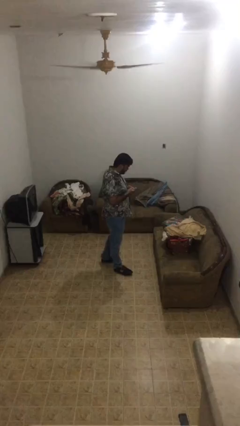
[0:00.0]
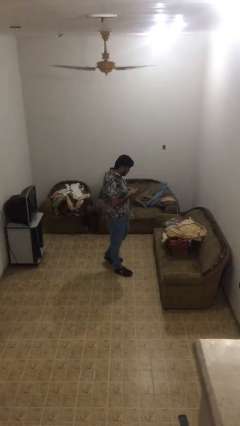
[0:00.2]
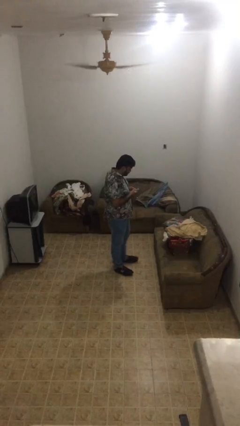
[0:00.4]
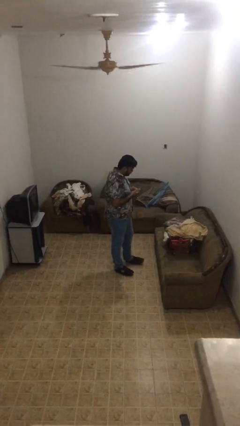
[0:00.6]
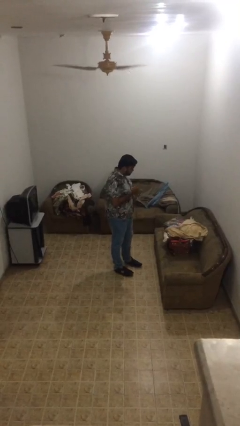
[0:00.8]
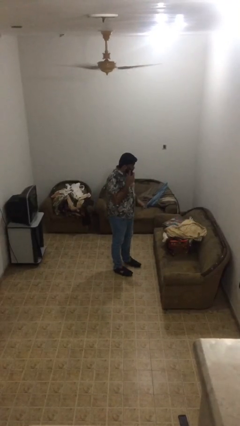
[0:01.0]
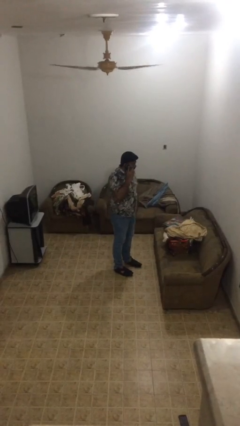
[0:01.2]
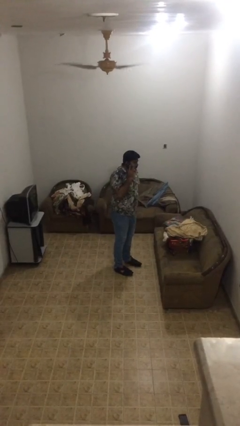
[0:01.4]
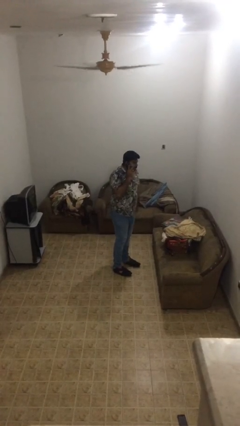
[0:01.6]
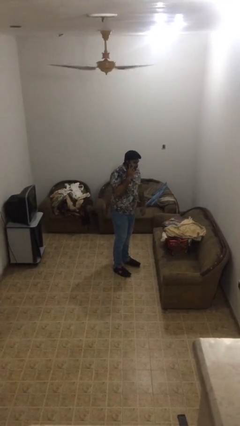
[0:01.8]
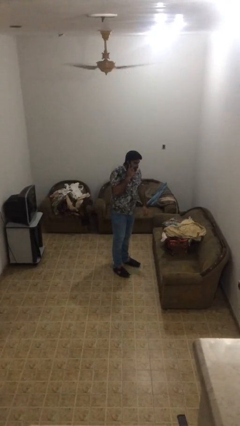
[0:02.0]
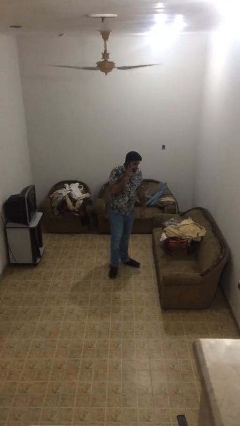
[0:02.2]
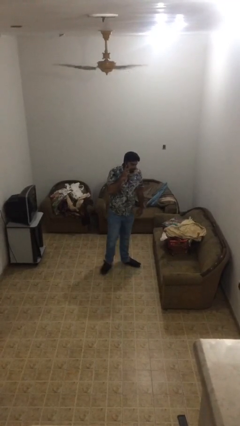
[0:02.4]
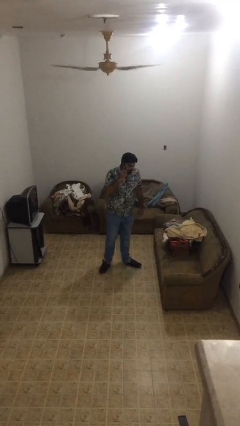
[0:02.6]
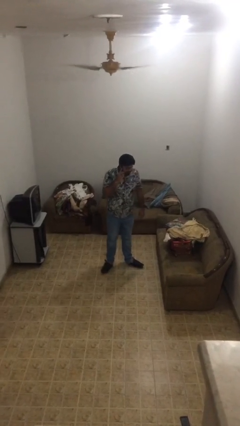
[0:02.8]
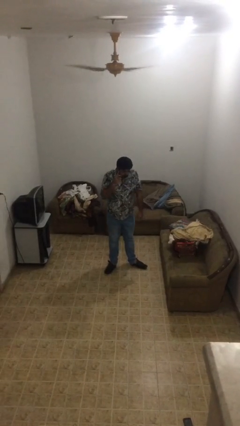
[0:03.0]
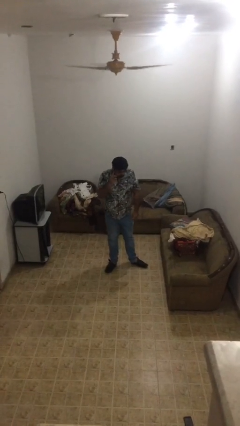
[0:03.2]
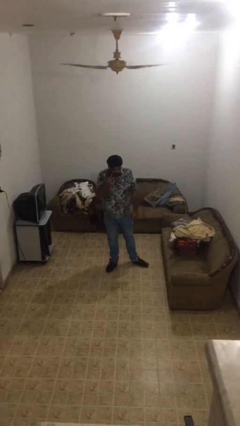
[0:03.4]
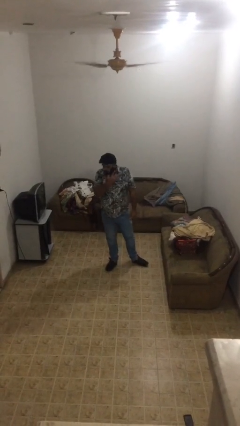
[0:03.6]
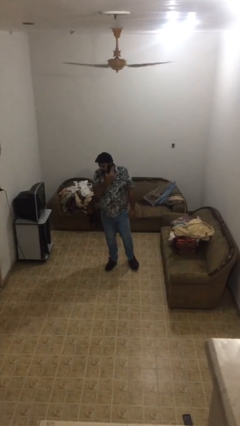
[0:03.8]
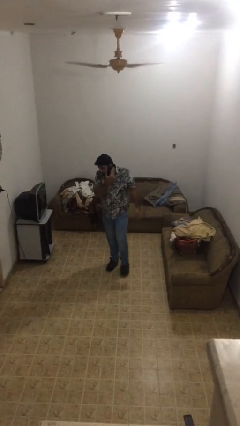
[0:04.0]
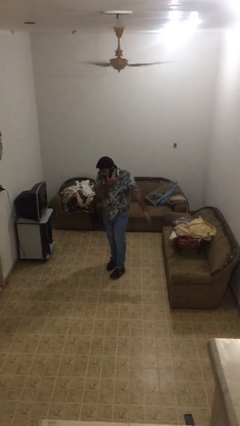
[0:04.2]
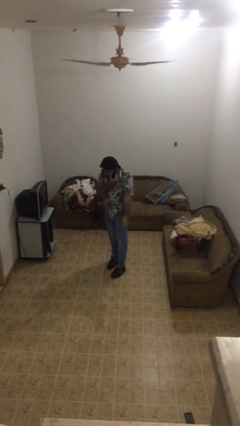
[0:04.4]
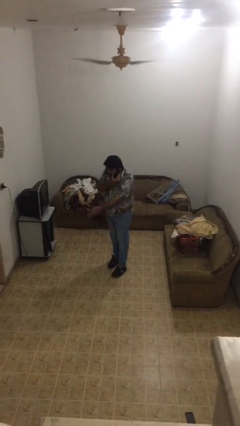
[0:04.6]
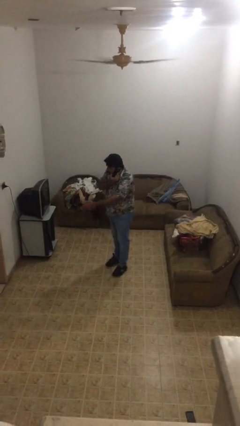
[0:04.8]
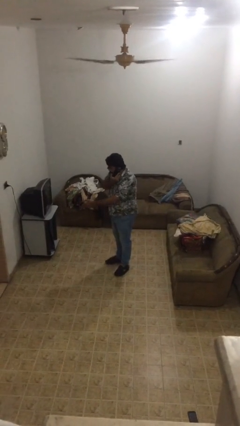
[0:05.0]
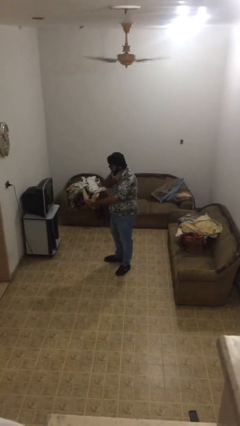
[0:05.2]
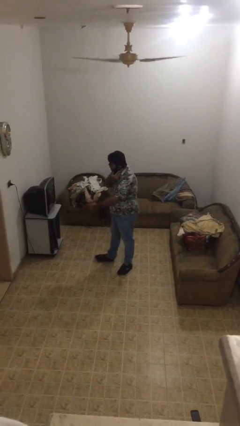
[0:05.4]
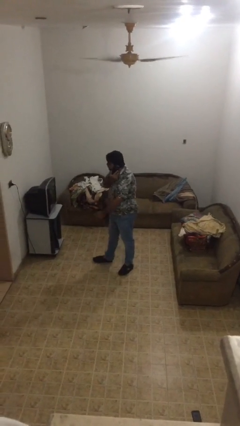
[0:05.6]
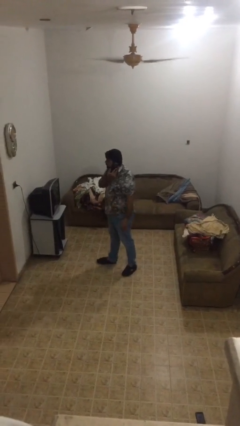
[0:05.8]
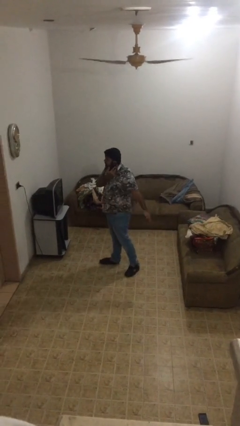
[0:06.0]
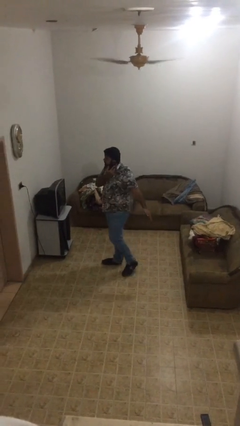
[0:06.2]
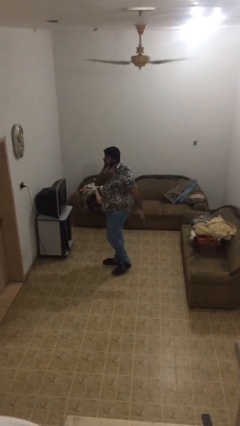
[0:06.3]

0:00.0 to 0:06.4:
person talks on phone

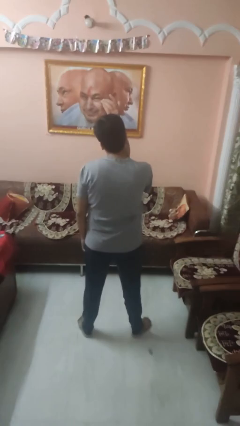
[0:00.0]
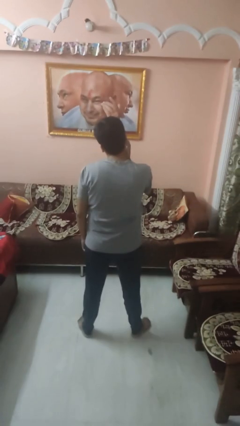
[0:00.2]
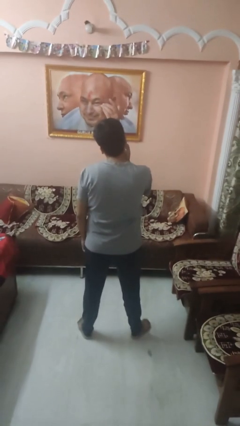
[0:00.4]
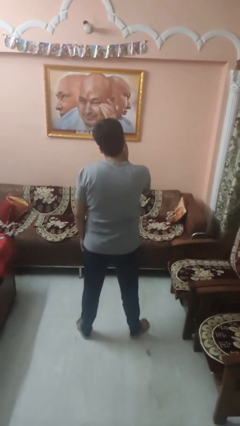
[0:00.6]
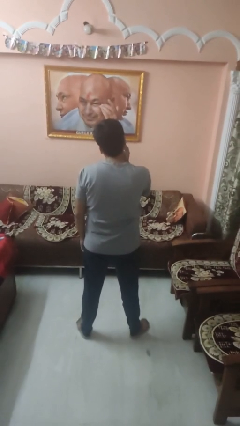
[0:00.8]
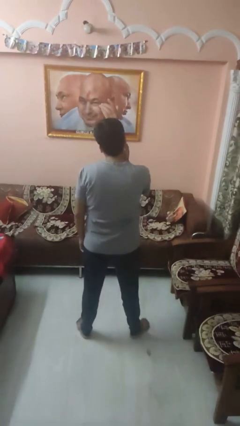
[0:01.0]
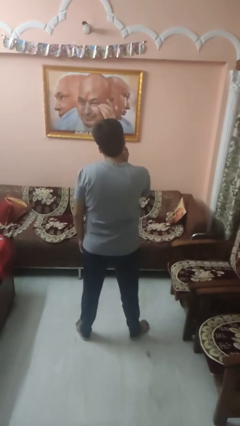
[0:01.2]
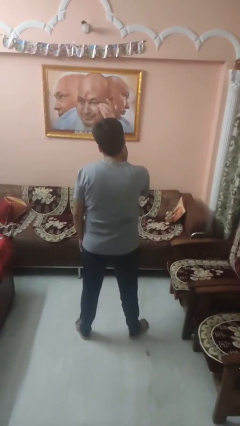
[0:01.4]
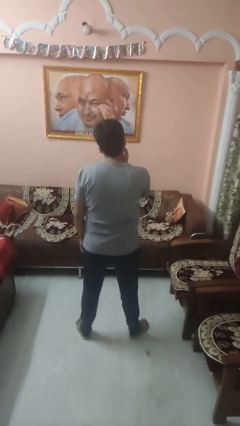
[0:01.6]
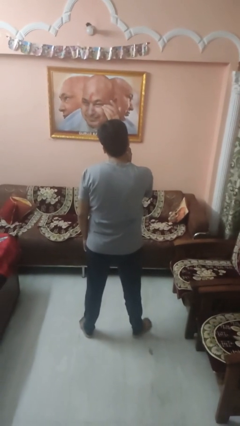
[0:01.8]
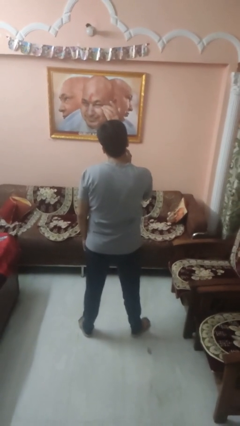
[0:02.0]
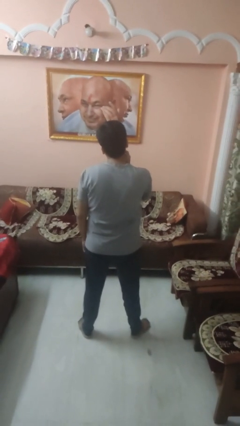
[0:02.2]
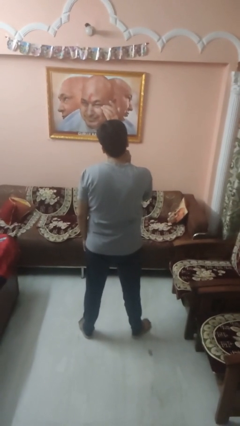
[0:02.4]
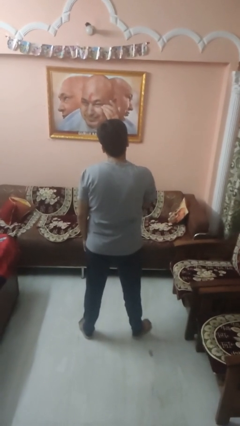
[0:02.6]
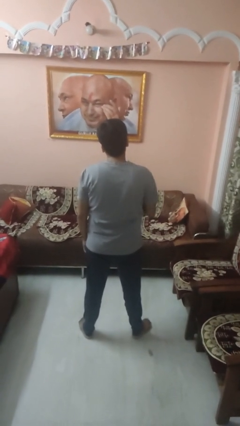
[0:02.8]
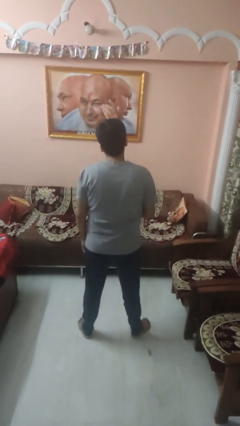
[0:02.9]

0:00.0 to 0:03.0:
person scratches face

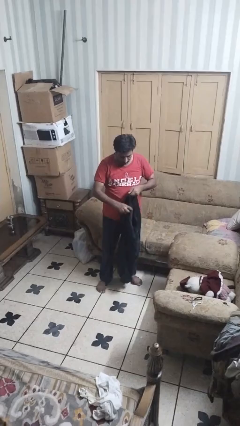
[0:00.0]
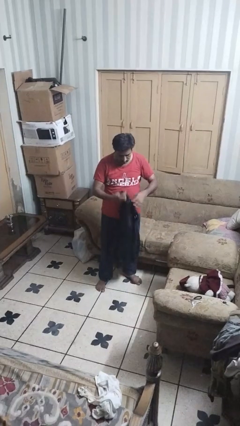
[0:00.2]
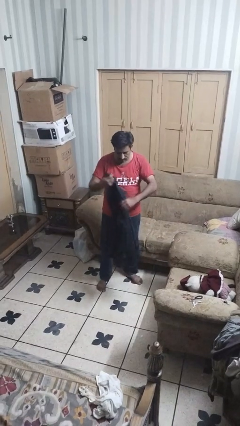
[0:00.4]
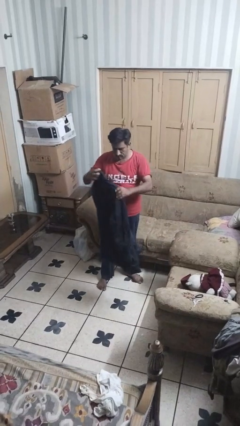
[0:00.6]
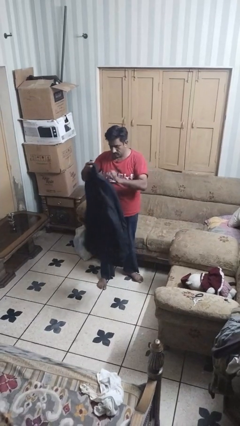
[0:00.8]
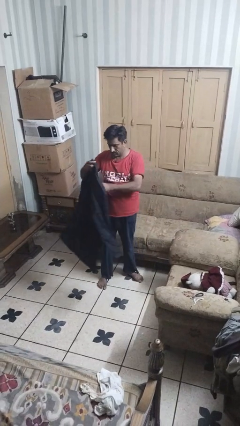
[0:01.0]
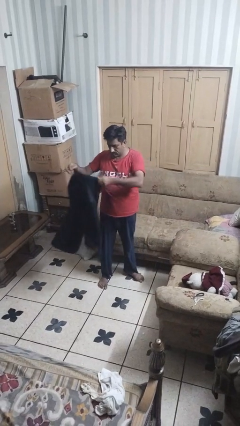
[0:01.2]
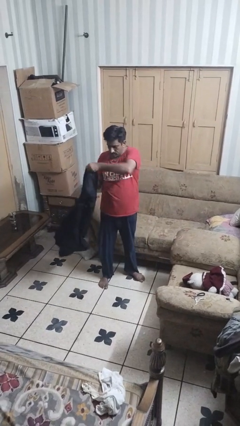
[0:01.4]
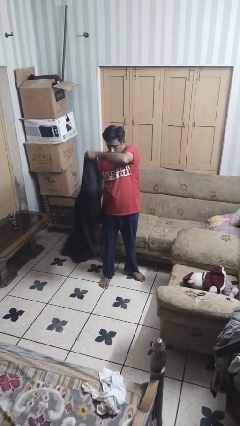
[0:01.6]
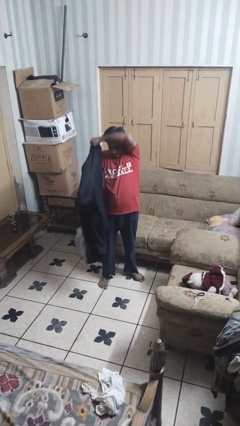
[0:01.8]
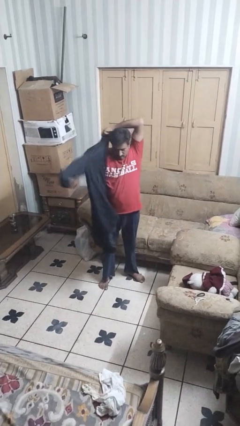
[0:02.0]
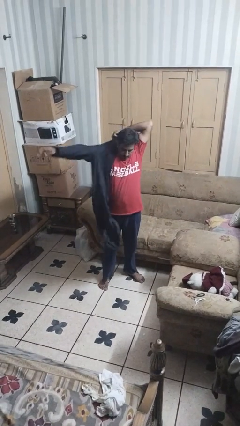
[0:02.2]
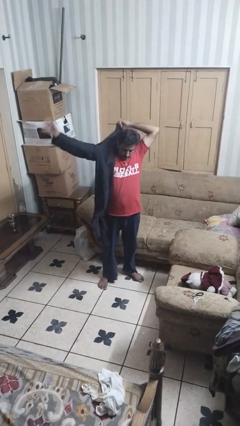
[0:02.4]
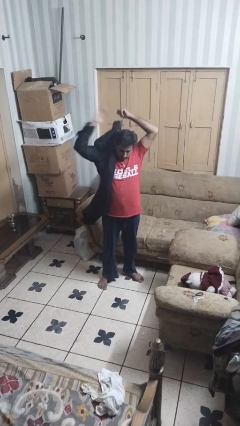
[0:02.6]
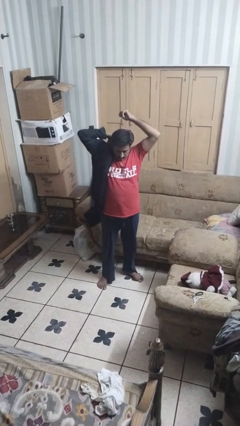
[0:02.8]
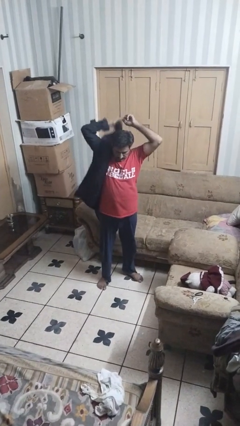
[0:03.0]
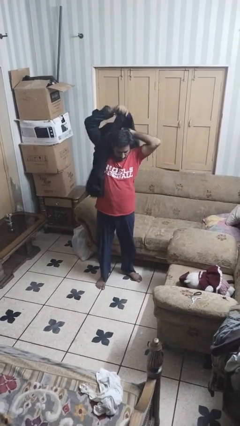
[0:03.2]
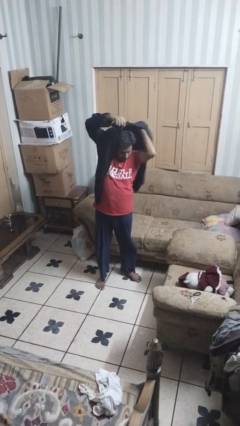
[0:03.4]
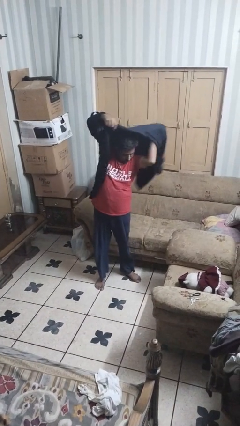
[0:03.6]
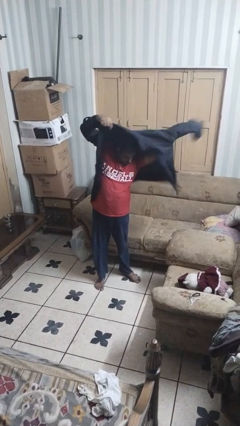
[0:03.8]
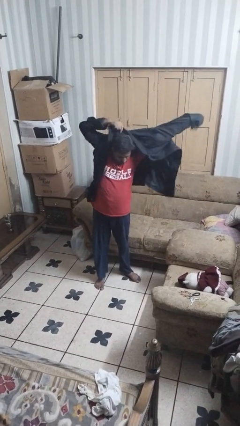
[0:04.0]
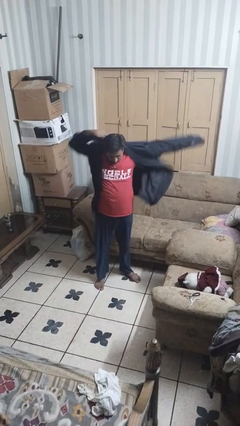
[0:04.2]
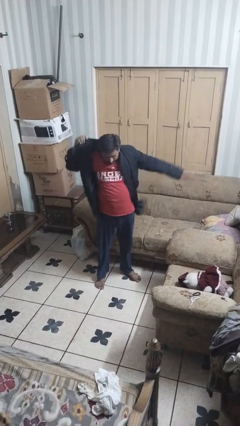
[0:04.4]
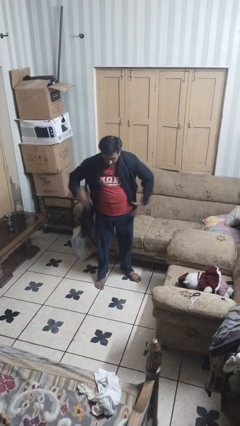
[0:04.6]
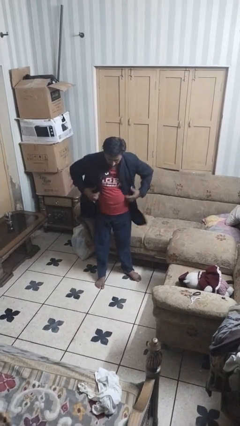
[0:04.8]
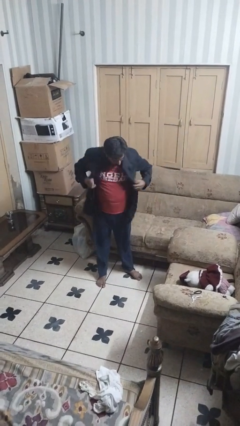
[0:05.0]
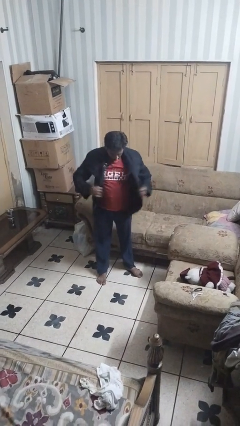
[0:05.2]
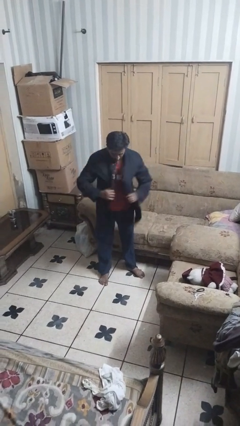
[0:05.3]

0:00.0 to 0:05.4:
person puts on jacket

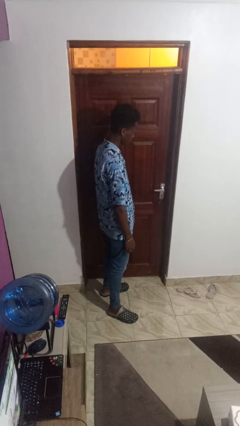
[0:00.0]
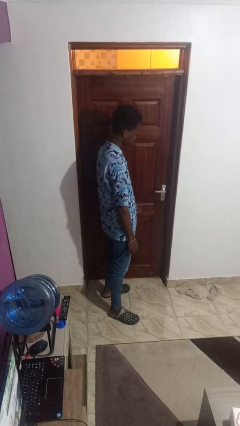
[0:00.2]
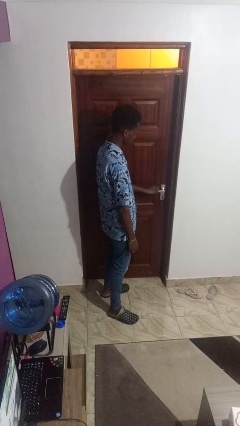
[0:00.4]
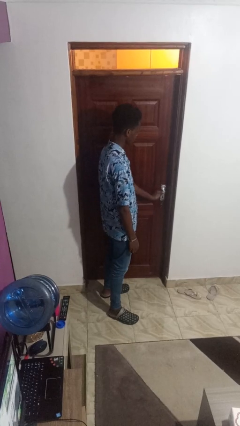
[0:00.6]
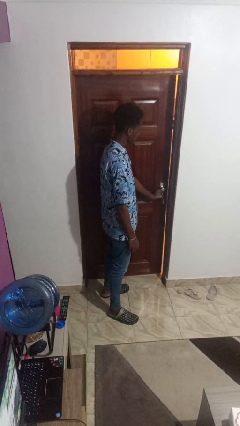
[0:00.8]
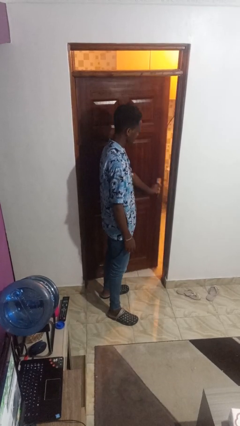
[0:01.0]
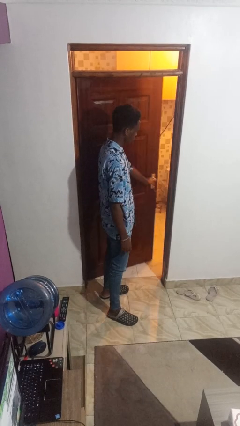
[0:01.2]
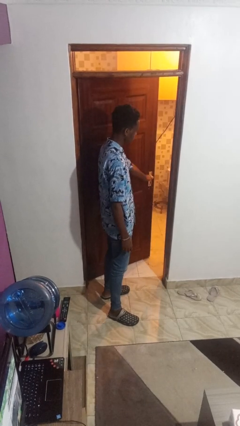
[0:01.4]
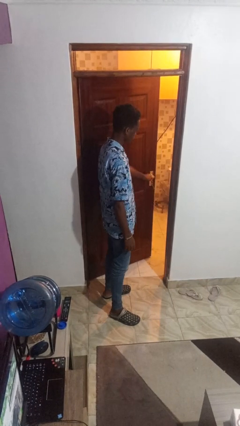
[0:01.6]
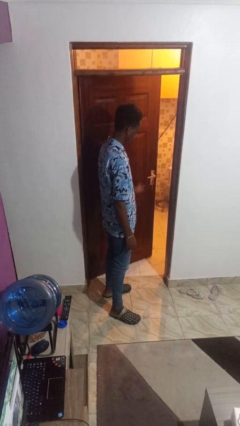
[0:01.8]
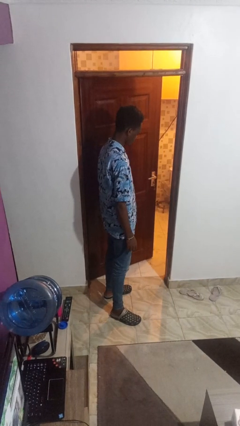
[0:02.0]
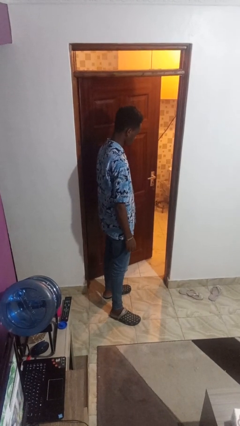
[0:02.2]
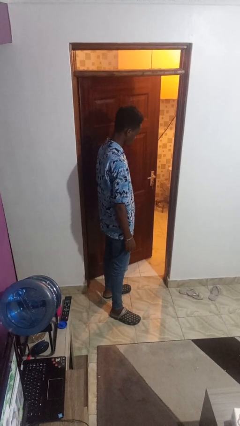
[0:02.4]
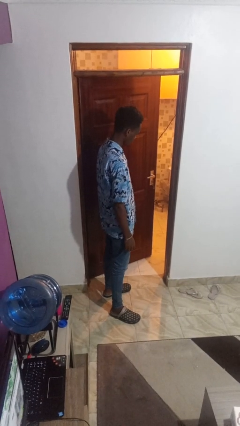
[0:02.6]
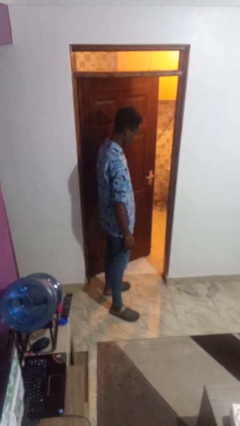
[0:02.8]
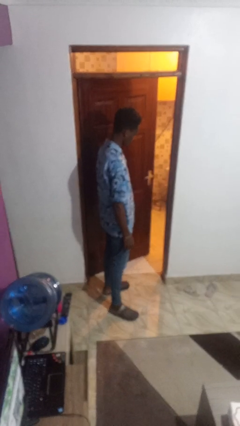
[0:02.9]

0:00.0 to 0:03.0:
person opens facility door
